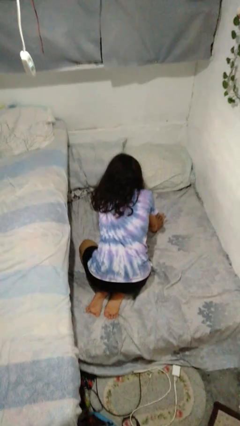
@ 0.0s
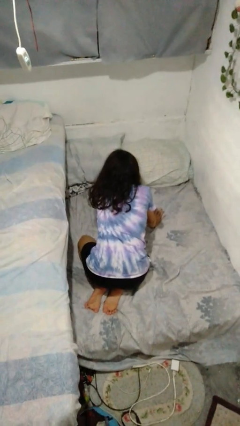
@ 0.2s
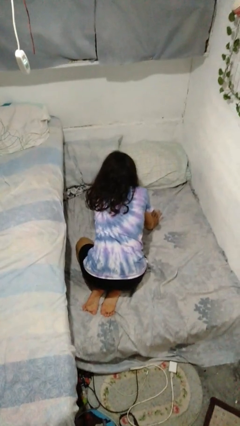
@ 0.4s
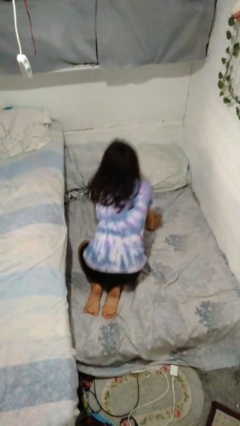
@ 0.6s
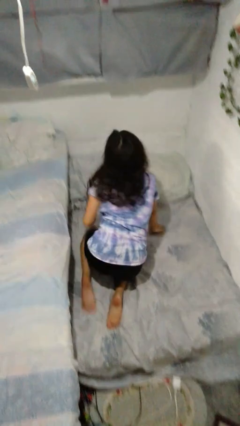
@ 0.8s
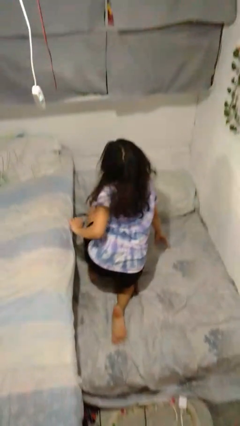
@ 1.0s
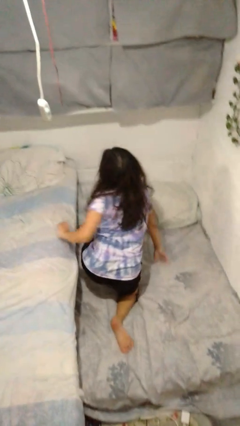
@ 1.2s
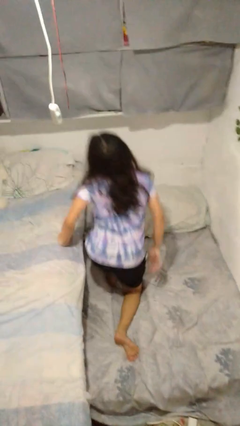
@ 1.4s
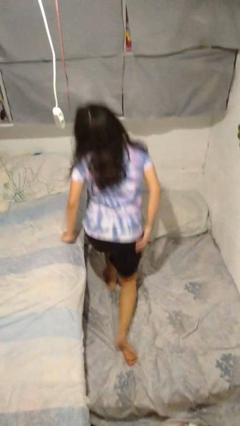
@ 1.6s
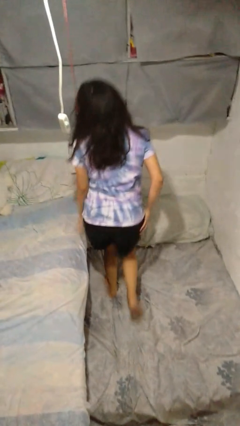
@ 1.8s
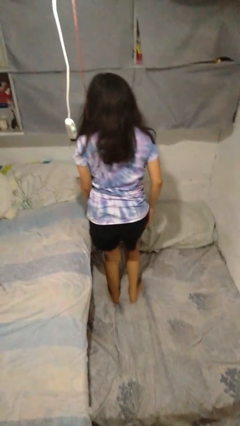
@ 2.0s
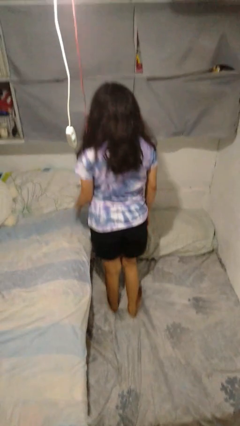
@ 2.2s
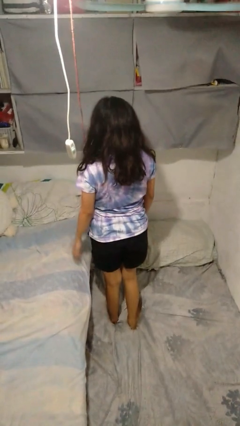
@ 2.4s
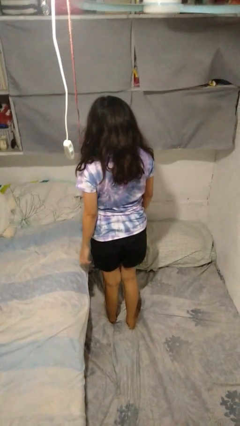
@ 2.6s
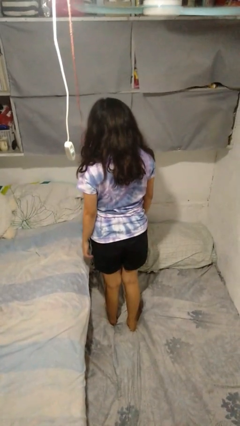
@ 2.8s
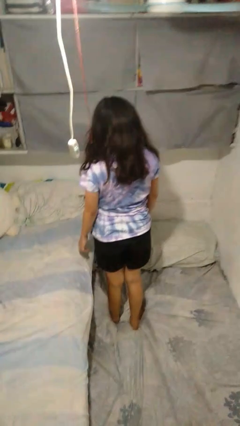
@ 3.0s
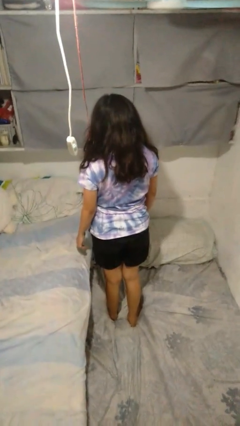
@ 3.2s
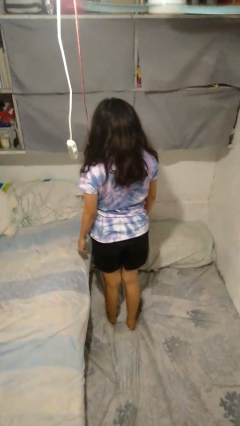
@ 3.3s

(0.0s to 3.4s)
person stands up from floor

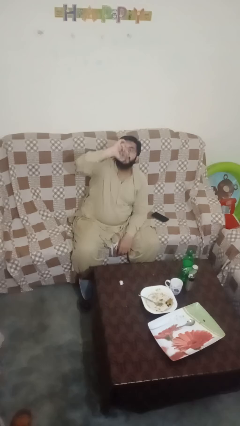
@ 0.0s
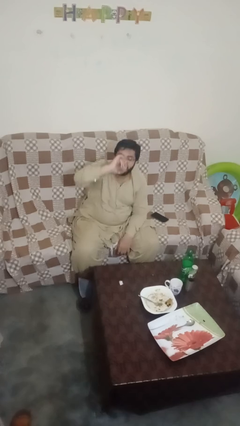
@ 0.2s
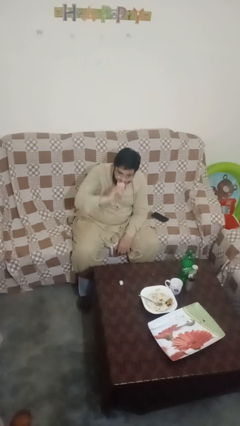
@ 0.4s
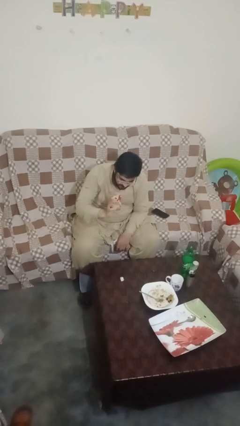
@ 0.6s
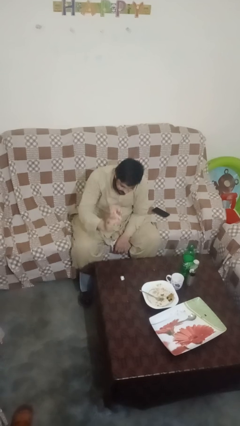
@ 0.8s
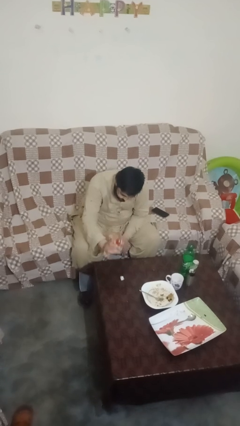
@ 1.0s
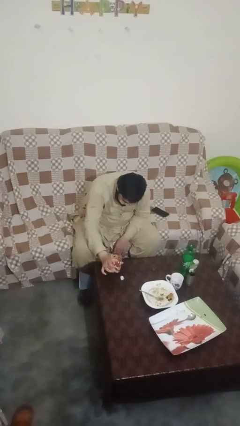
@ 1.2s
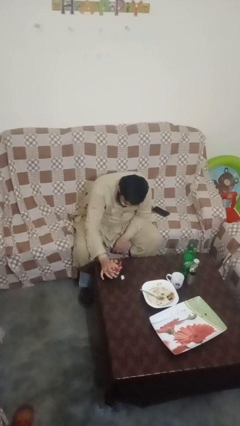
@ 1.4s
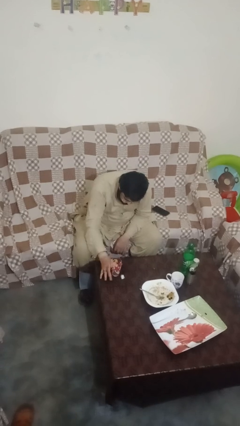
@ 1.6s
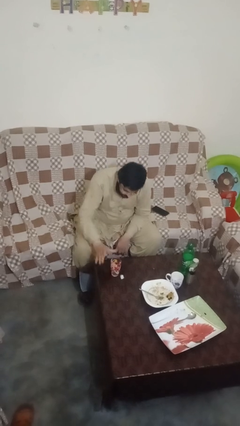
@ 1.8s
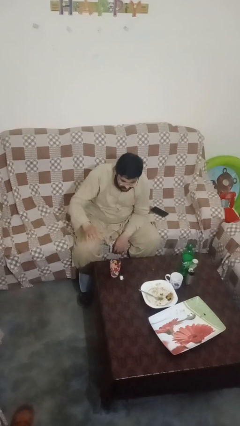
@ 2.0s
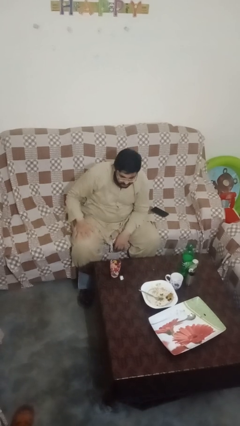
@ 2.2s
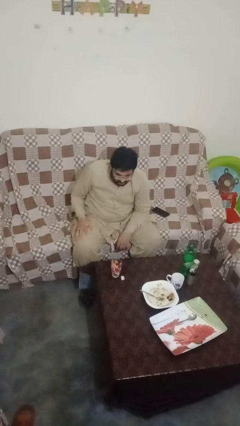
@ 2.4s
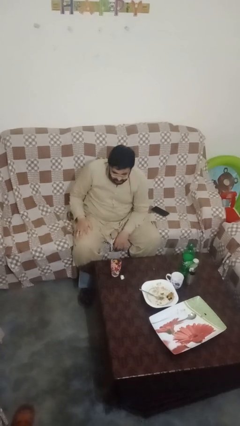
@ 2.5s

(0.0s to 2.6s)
person puts down object on table

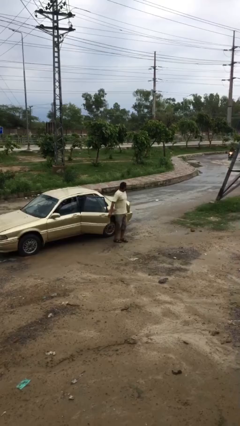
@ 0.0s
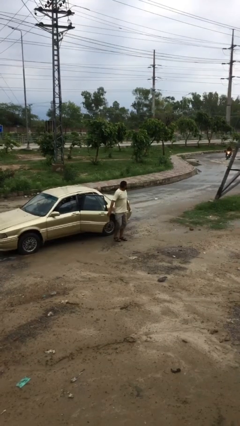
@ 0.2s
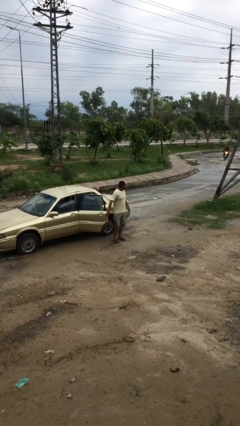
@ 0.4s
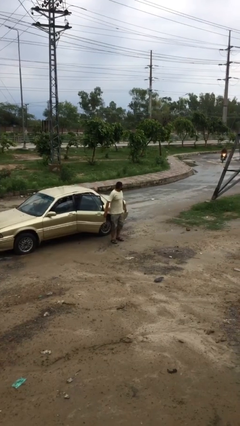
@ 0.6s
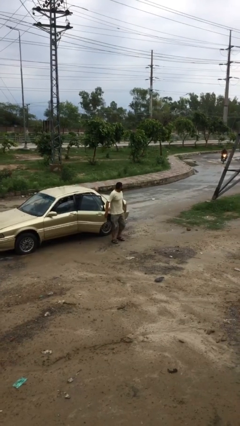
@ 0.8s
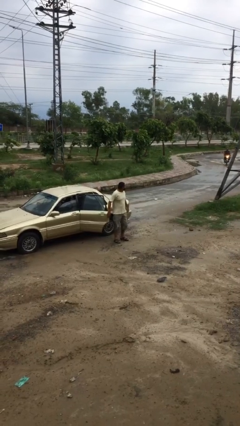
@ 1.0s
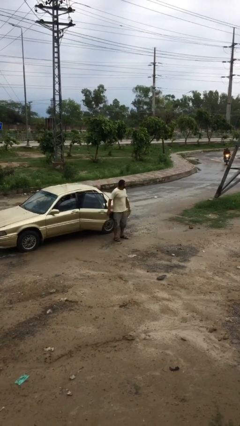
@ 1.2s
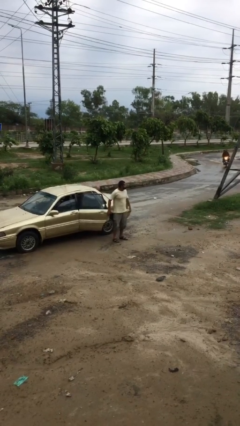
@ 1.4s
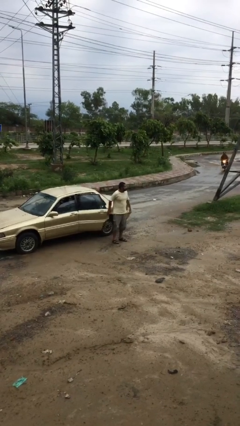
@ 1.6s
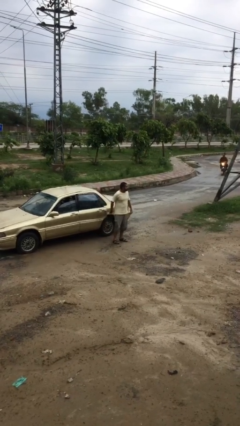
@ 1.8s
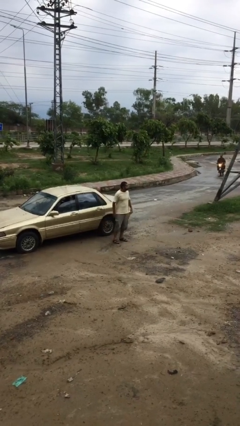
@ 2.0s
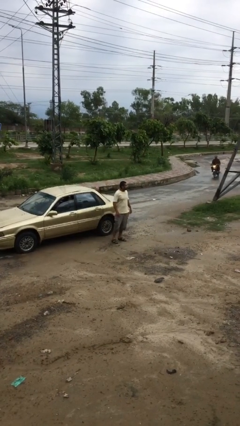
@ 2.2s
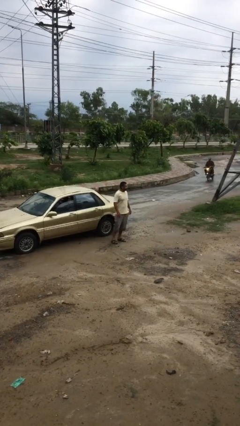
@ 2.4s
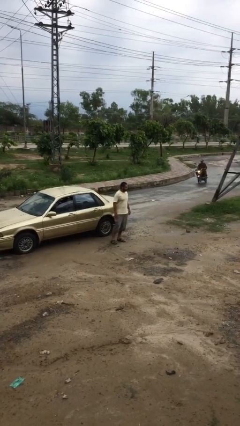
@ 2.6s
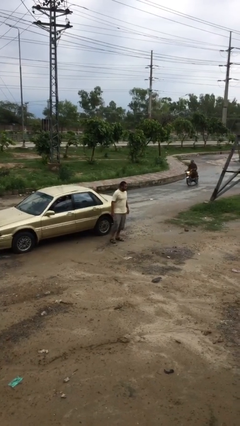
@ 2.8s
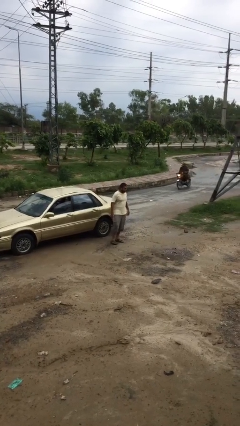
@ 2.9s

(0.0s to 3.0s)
person closes car door

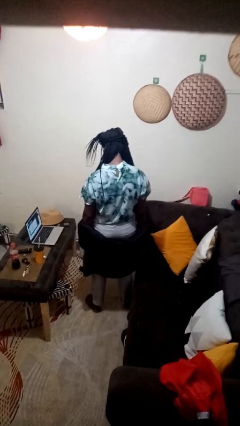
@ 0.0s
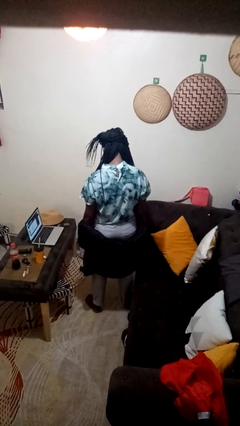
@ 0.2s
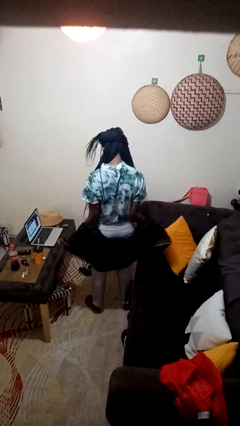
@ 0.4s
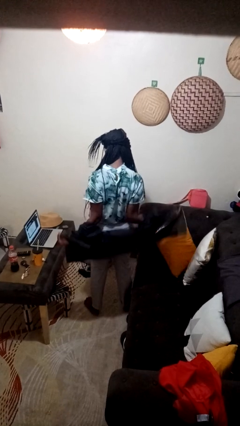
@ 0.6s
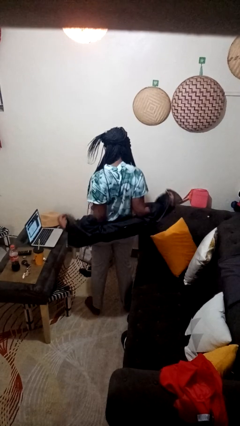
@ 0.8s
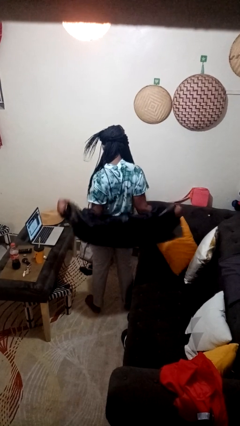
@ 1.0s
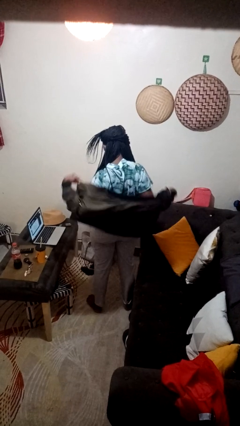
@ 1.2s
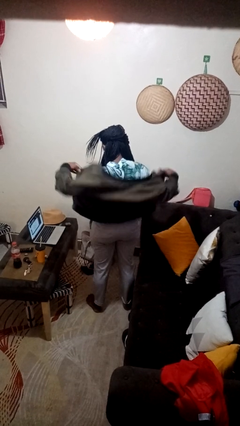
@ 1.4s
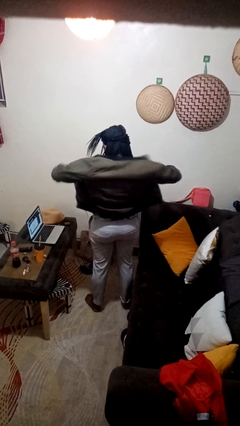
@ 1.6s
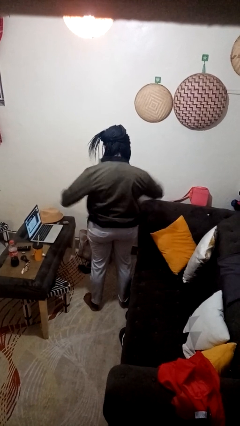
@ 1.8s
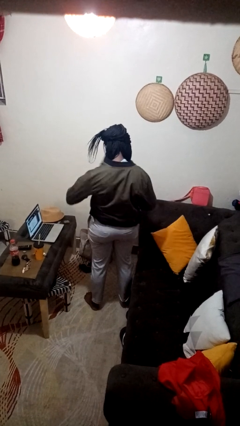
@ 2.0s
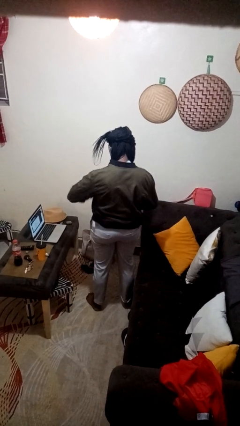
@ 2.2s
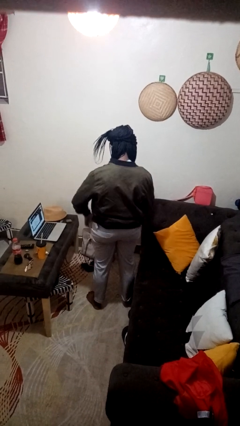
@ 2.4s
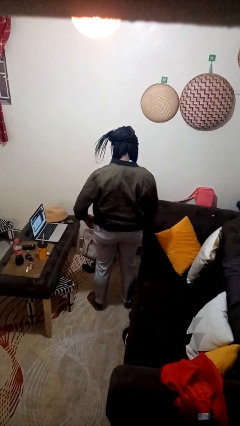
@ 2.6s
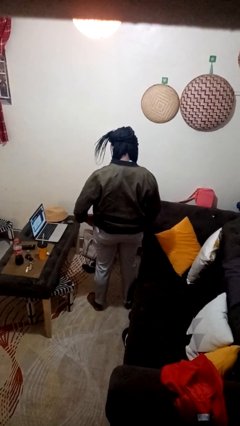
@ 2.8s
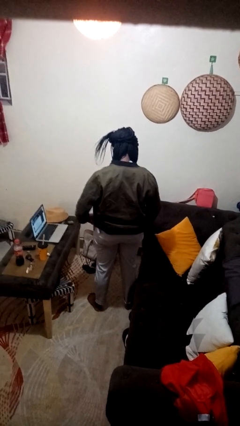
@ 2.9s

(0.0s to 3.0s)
person puts on jacket

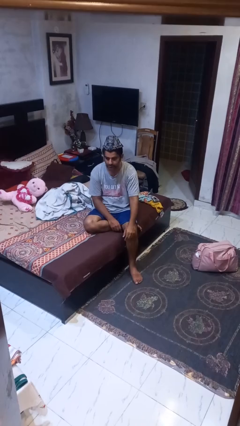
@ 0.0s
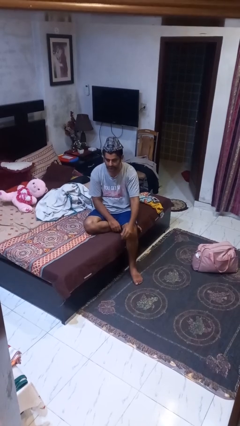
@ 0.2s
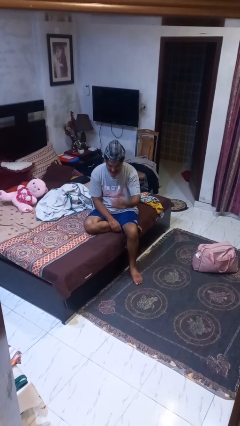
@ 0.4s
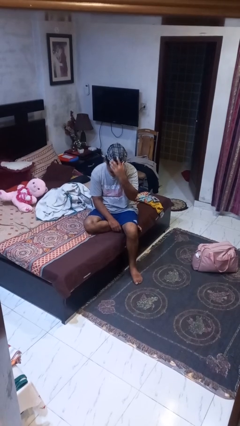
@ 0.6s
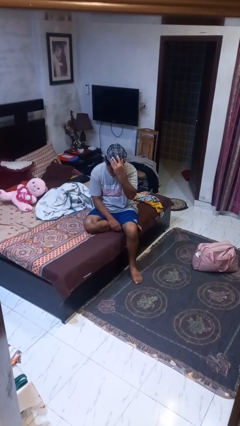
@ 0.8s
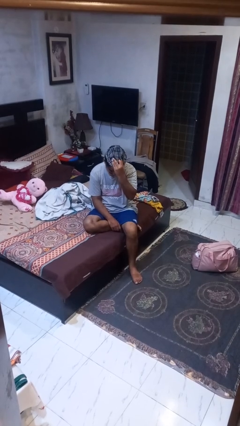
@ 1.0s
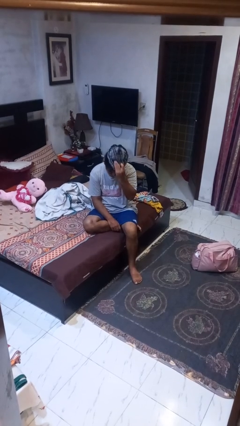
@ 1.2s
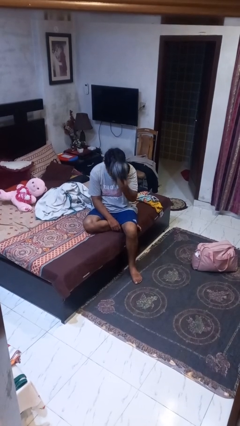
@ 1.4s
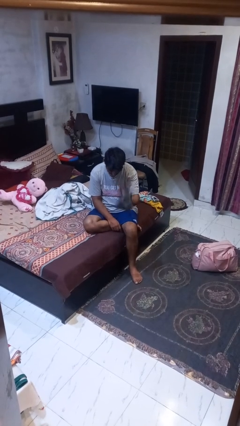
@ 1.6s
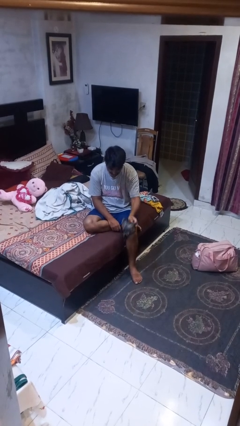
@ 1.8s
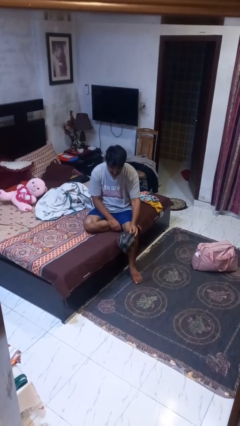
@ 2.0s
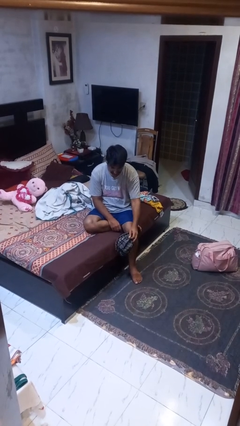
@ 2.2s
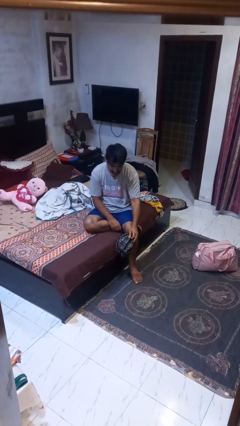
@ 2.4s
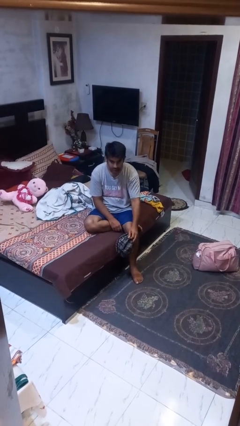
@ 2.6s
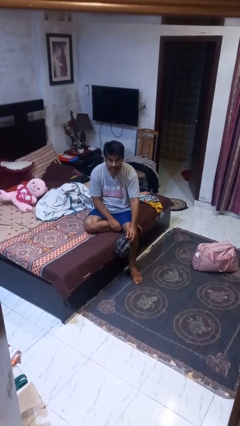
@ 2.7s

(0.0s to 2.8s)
person takes off hat

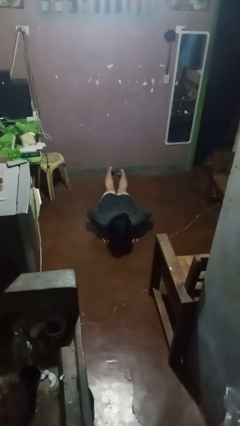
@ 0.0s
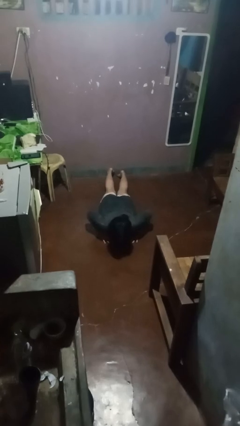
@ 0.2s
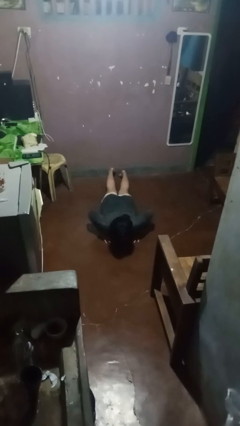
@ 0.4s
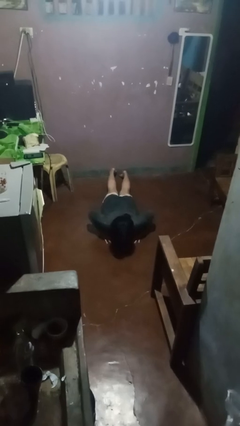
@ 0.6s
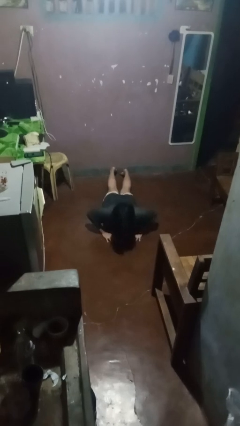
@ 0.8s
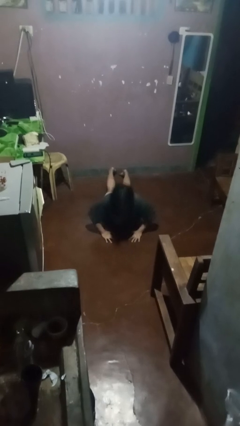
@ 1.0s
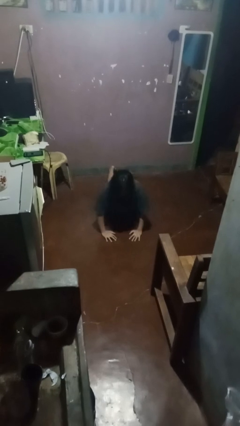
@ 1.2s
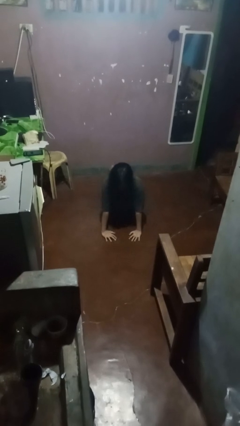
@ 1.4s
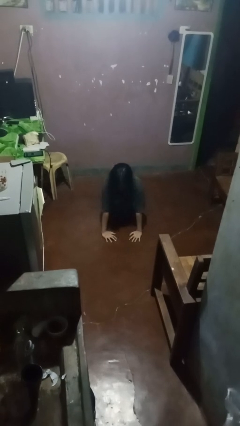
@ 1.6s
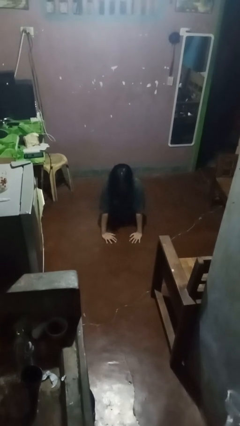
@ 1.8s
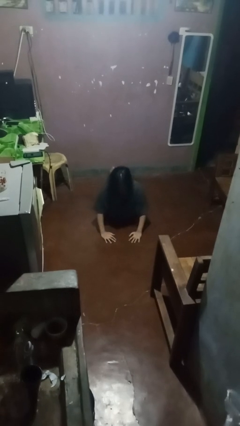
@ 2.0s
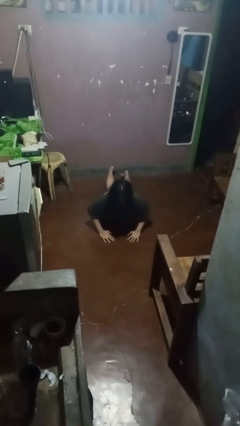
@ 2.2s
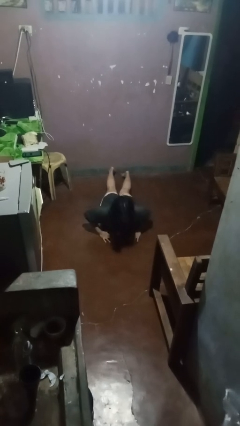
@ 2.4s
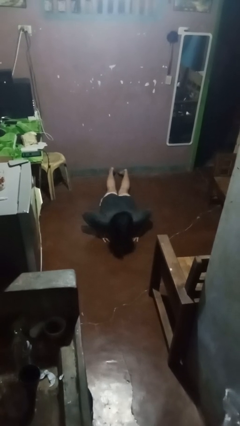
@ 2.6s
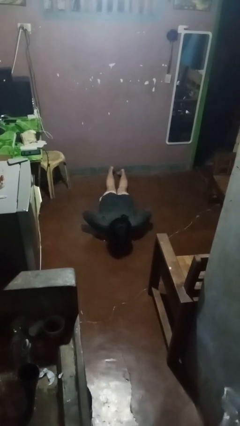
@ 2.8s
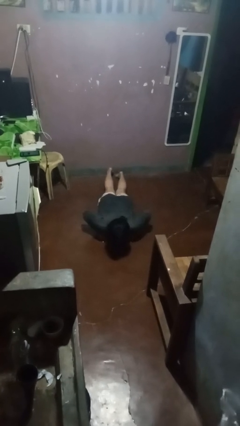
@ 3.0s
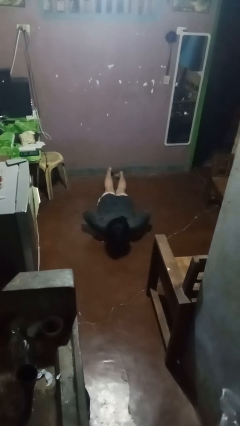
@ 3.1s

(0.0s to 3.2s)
person exercises with pushup
